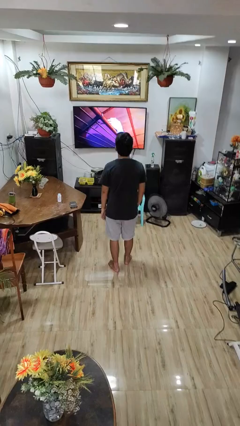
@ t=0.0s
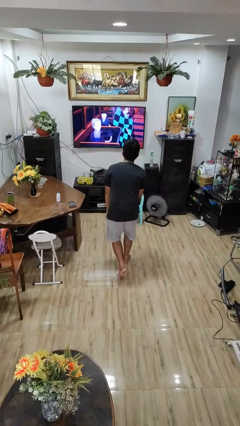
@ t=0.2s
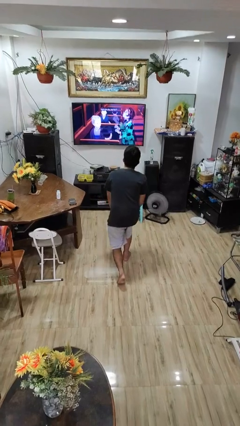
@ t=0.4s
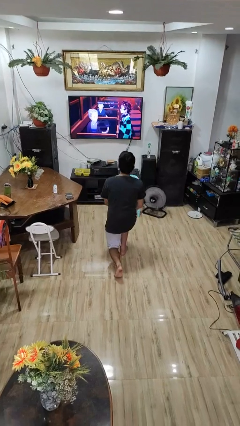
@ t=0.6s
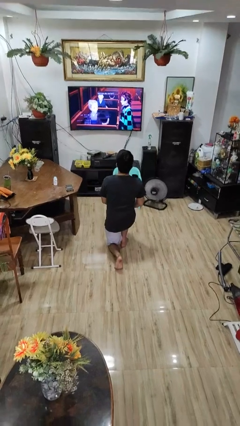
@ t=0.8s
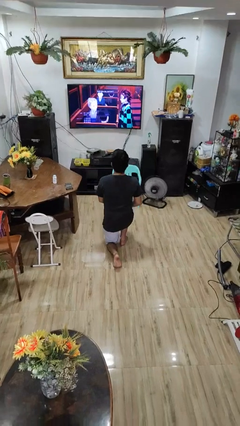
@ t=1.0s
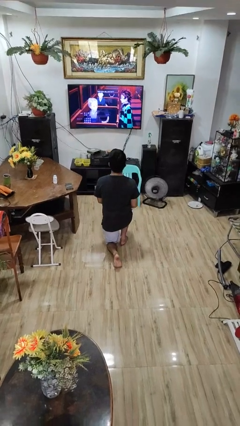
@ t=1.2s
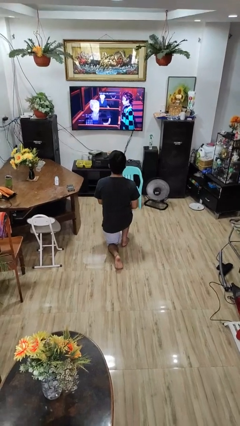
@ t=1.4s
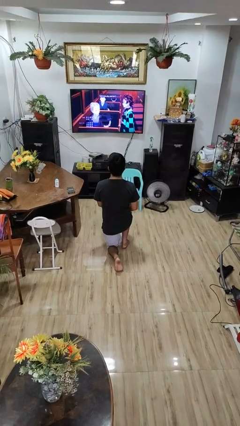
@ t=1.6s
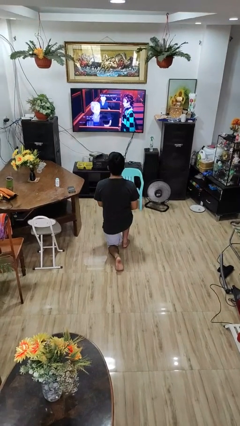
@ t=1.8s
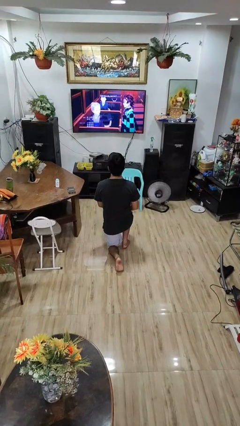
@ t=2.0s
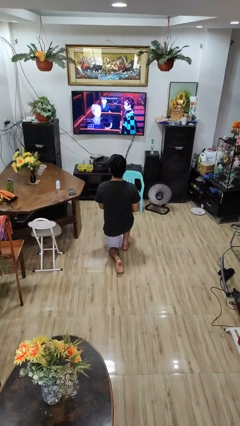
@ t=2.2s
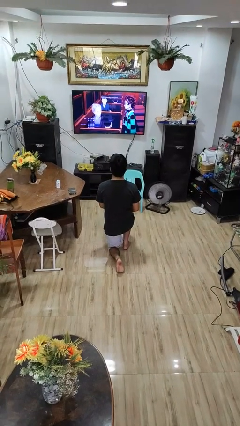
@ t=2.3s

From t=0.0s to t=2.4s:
person kneels

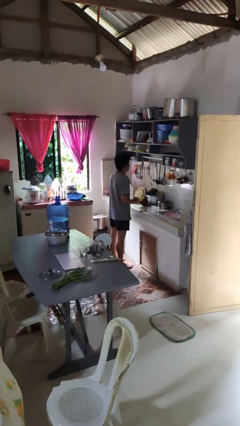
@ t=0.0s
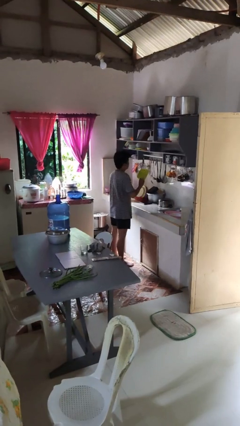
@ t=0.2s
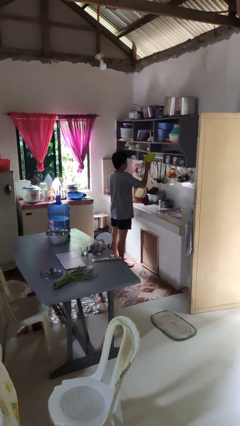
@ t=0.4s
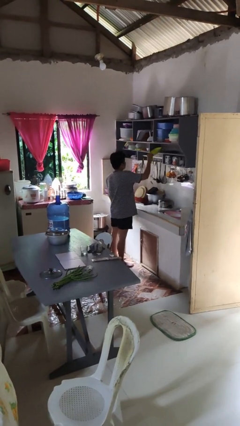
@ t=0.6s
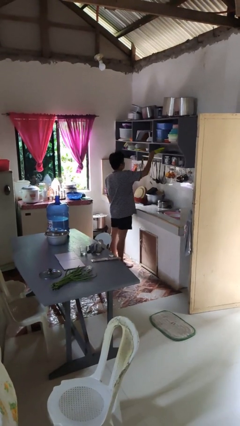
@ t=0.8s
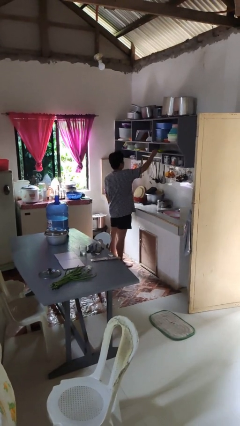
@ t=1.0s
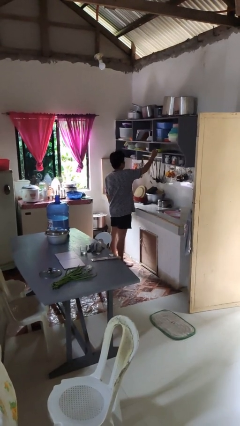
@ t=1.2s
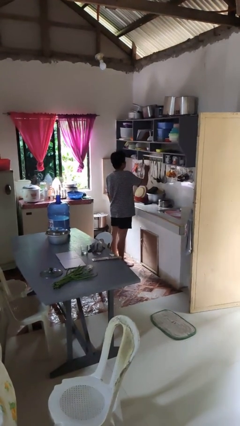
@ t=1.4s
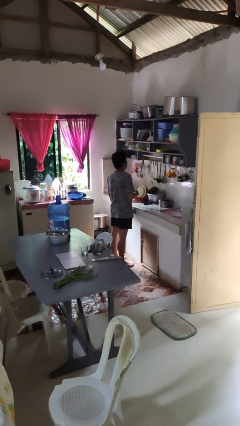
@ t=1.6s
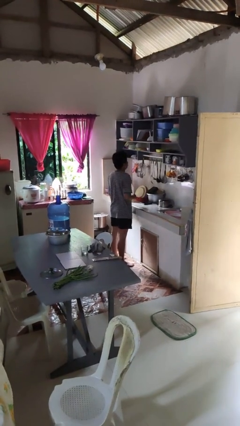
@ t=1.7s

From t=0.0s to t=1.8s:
person puts object in cabinet

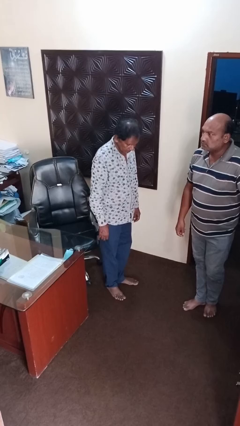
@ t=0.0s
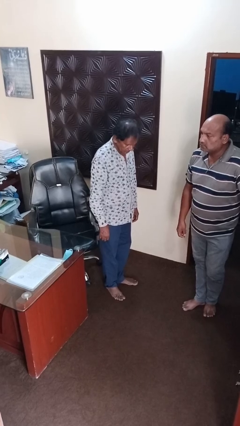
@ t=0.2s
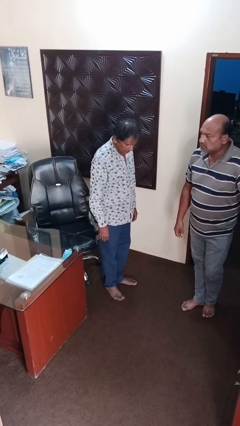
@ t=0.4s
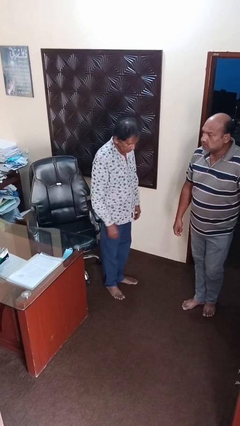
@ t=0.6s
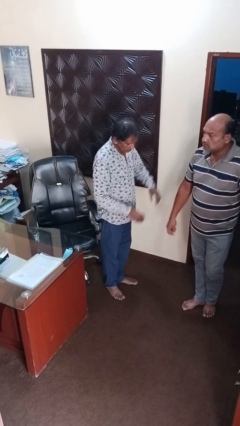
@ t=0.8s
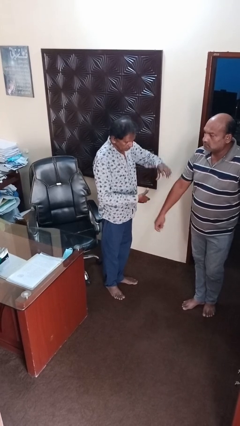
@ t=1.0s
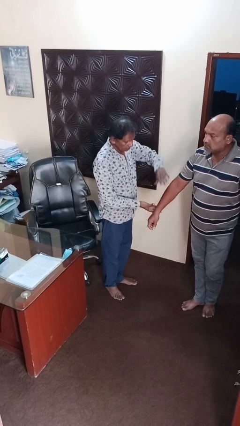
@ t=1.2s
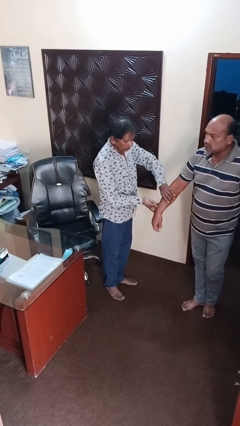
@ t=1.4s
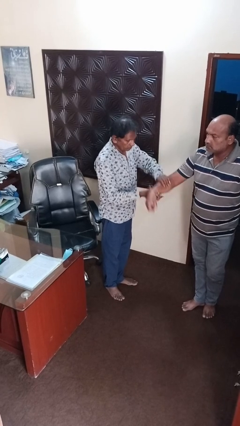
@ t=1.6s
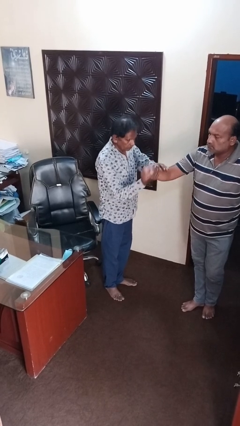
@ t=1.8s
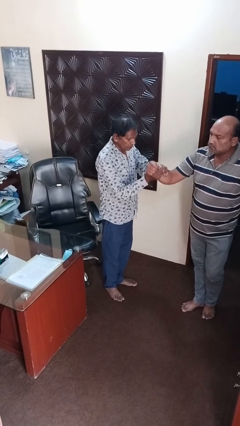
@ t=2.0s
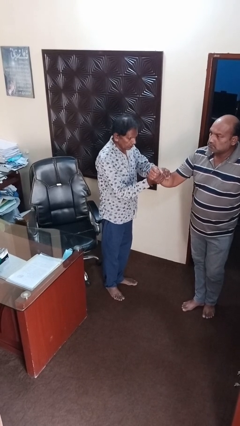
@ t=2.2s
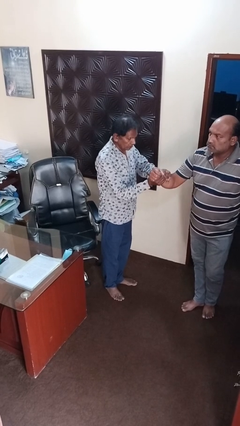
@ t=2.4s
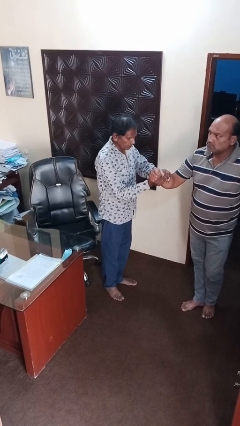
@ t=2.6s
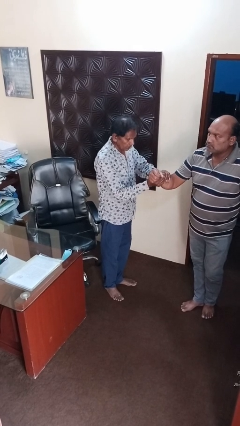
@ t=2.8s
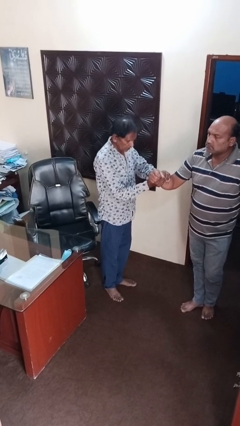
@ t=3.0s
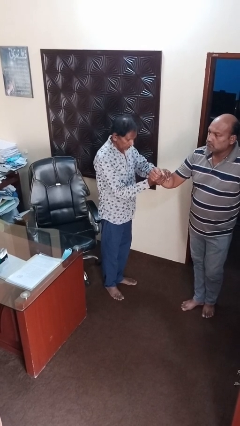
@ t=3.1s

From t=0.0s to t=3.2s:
person grabs person by forearm

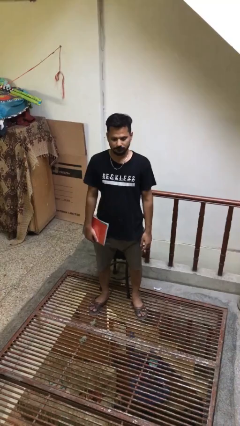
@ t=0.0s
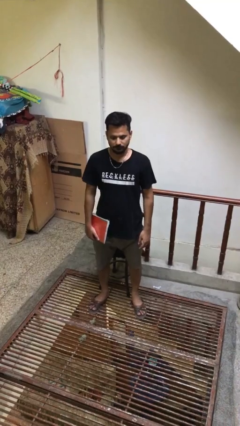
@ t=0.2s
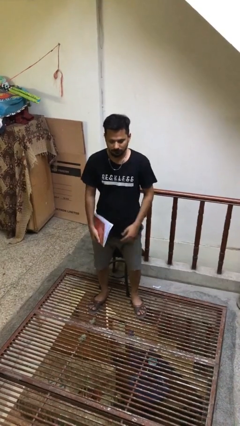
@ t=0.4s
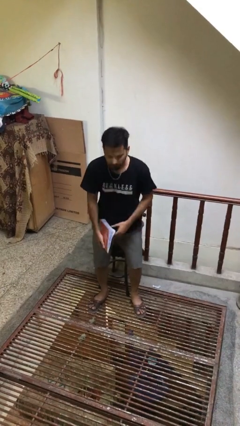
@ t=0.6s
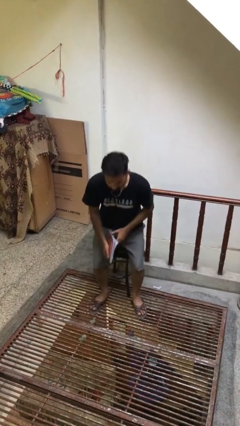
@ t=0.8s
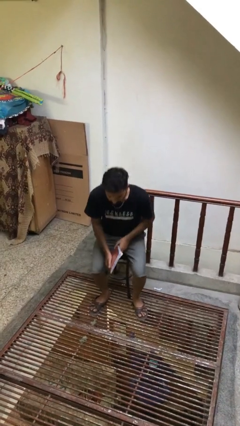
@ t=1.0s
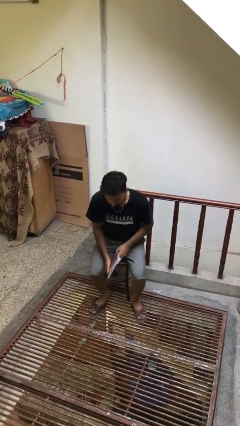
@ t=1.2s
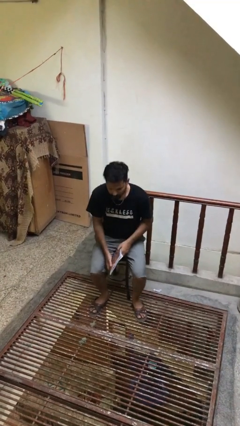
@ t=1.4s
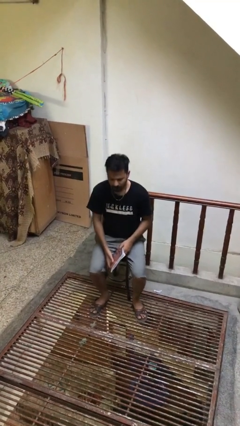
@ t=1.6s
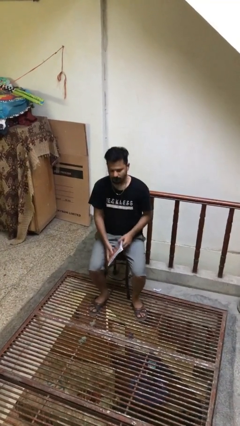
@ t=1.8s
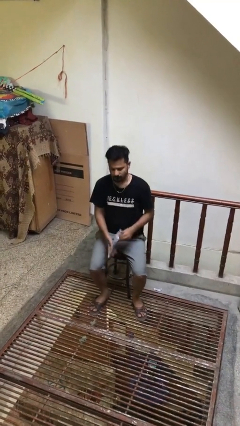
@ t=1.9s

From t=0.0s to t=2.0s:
person sits down

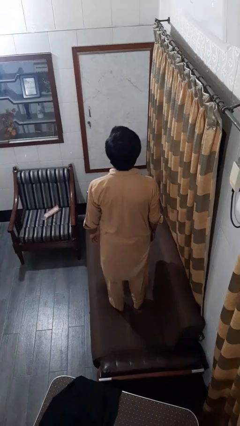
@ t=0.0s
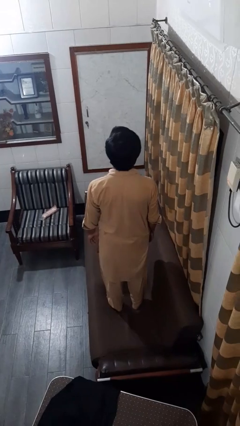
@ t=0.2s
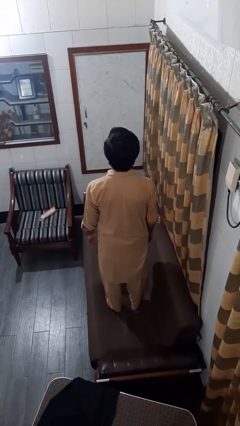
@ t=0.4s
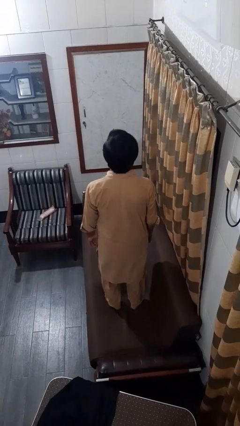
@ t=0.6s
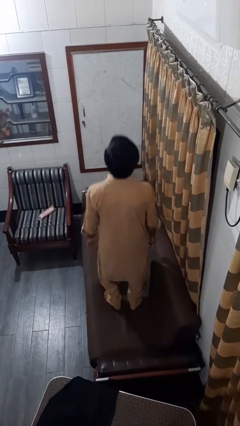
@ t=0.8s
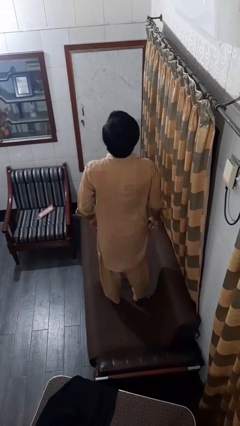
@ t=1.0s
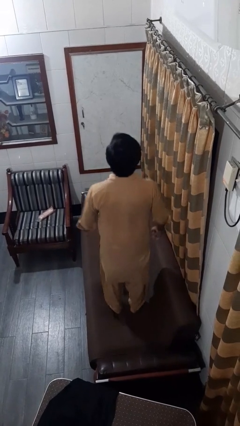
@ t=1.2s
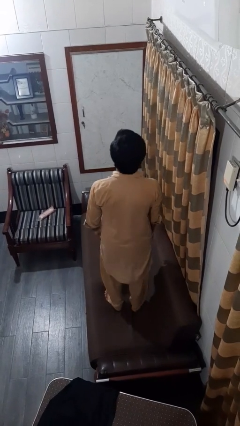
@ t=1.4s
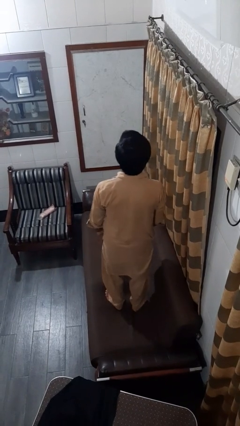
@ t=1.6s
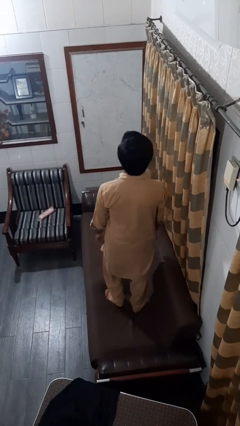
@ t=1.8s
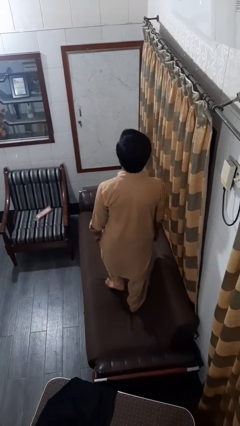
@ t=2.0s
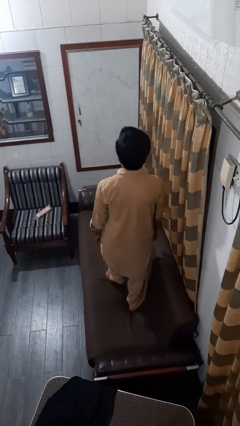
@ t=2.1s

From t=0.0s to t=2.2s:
person jumps on couch

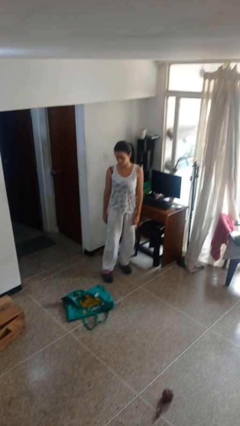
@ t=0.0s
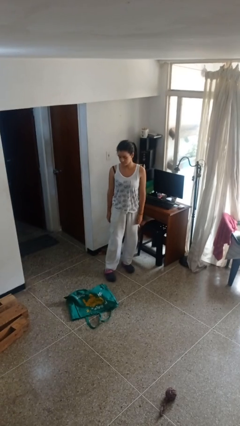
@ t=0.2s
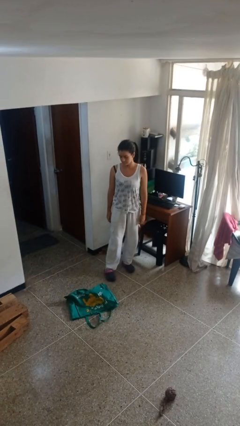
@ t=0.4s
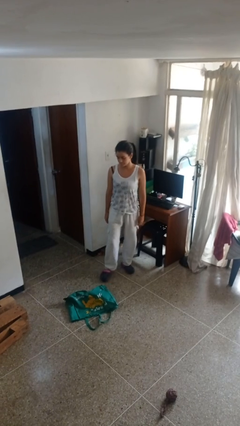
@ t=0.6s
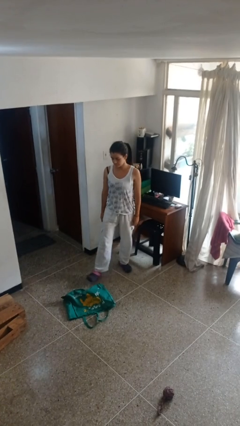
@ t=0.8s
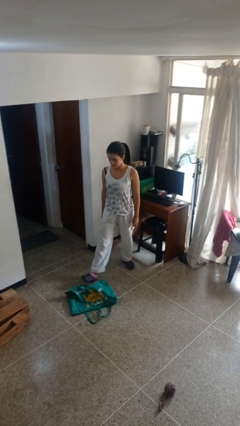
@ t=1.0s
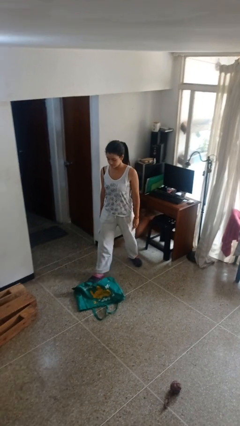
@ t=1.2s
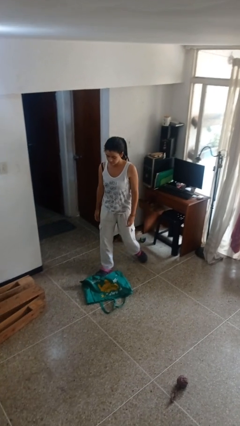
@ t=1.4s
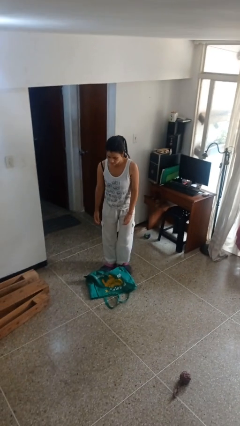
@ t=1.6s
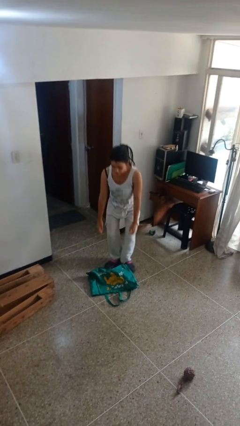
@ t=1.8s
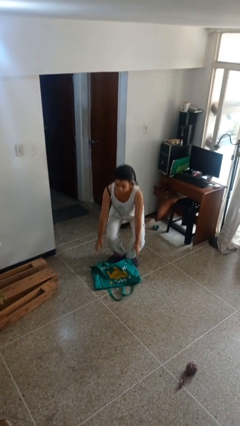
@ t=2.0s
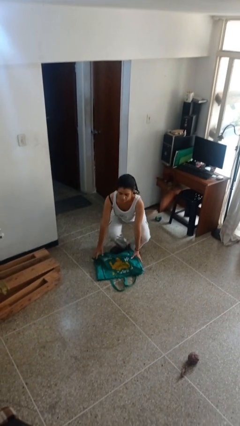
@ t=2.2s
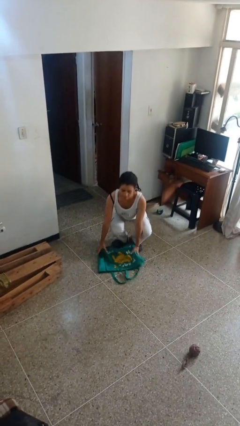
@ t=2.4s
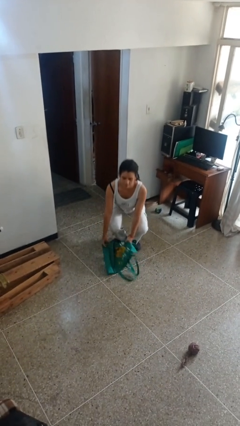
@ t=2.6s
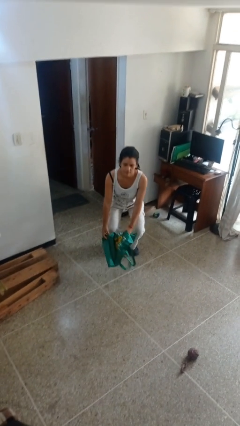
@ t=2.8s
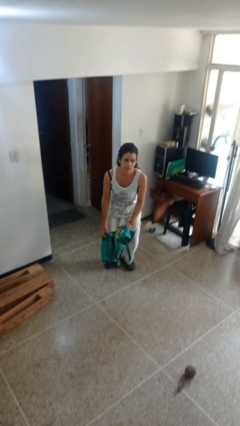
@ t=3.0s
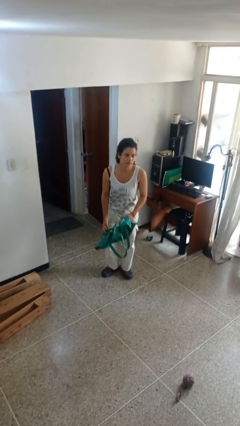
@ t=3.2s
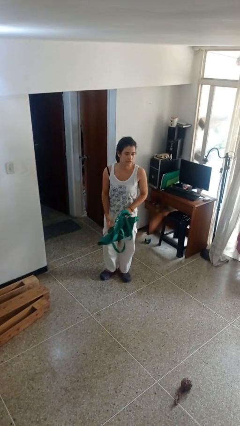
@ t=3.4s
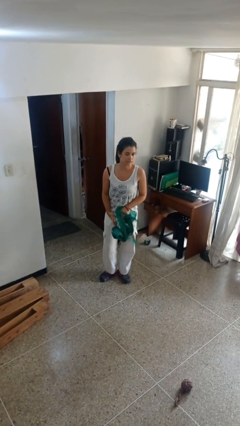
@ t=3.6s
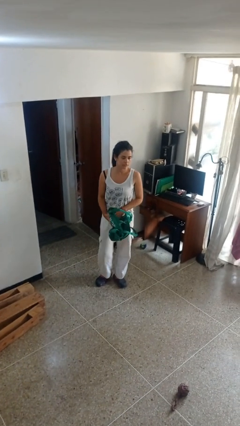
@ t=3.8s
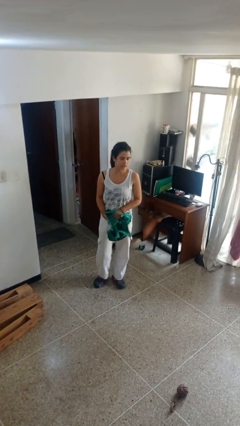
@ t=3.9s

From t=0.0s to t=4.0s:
person picks up object from floor

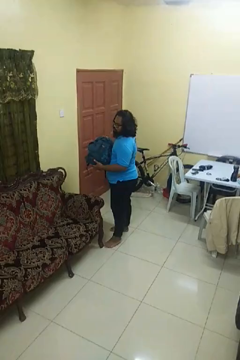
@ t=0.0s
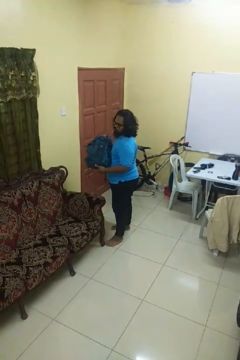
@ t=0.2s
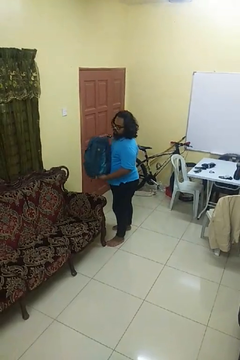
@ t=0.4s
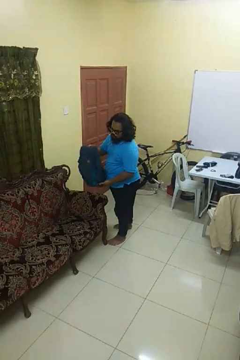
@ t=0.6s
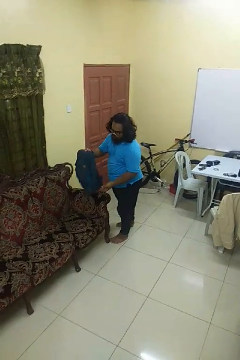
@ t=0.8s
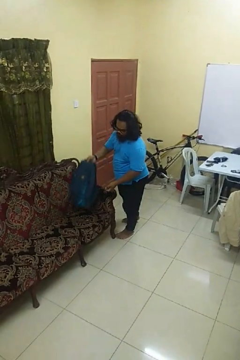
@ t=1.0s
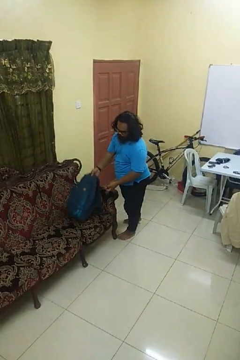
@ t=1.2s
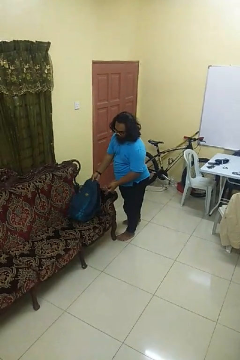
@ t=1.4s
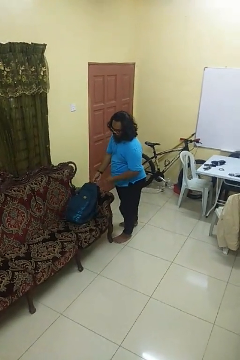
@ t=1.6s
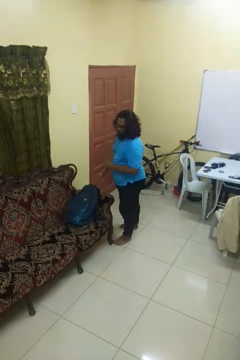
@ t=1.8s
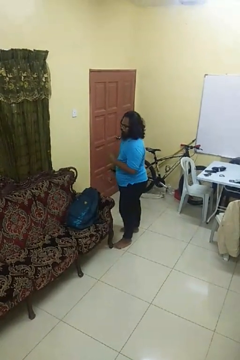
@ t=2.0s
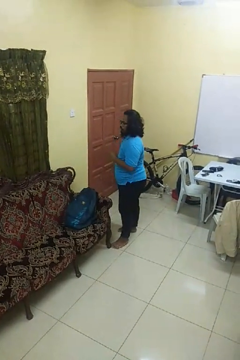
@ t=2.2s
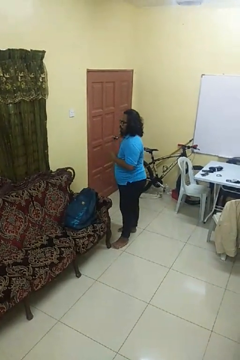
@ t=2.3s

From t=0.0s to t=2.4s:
person puts down object on couch
